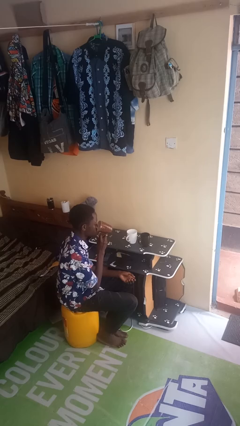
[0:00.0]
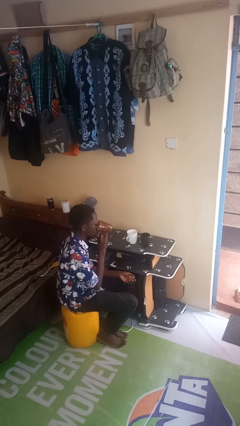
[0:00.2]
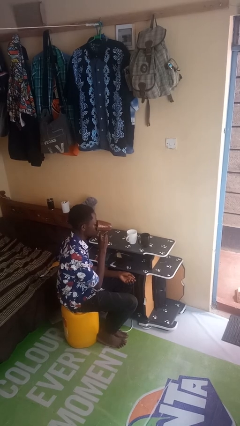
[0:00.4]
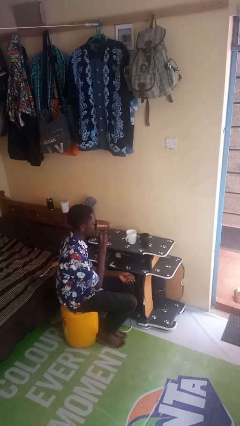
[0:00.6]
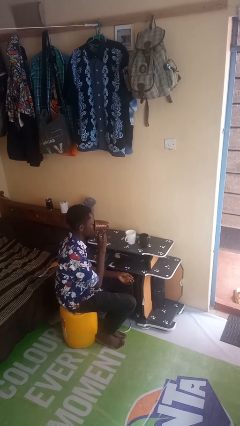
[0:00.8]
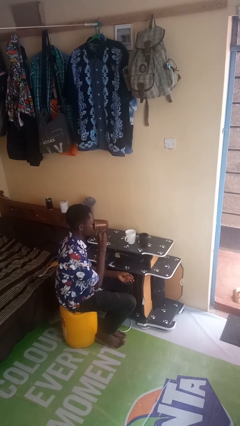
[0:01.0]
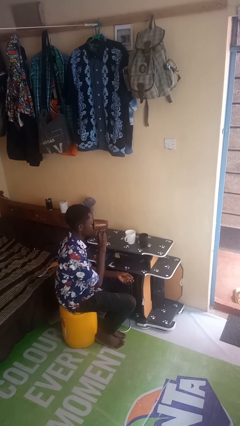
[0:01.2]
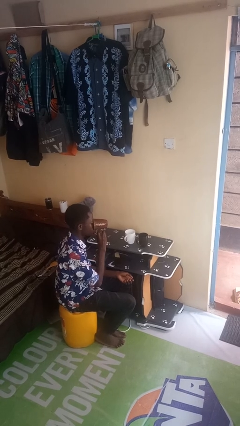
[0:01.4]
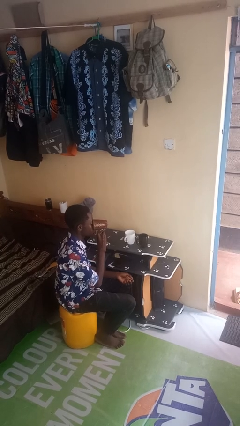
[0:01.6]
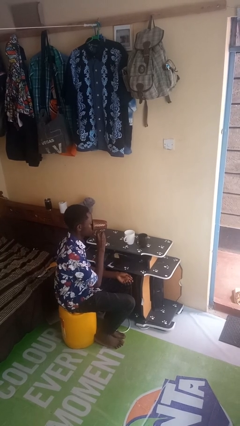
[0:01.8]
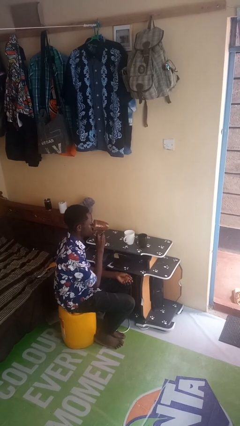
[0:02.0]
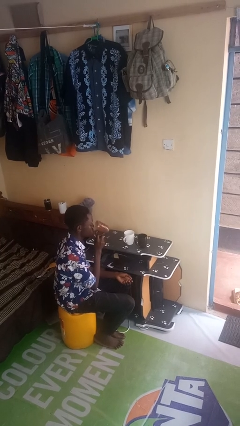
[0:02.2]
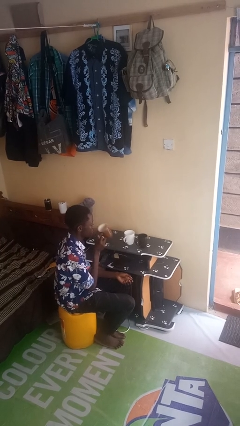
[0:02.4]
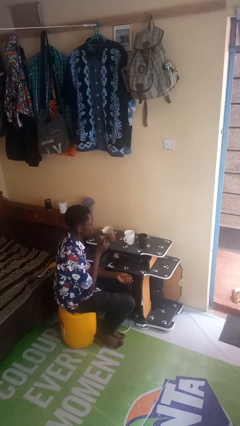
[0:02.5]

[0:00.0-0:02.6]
person drinks from shotglass

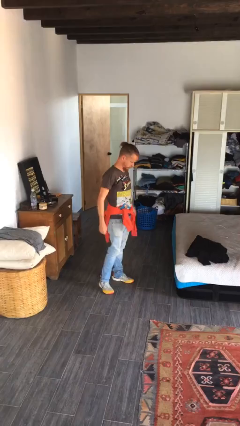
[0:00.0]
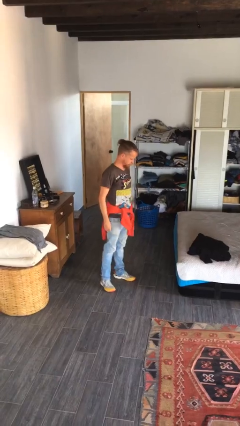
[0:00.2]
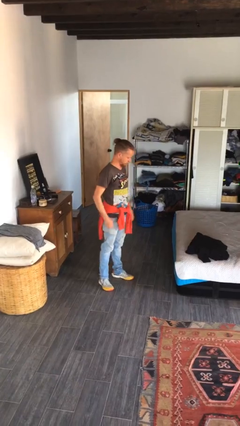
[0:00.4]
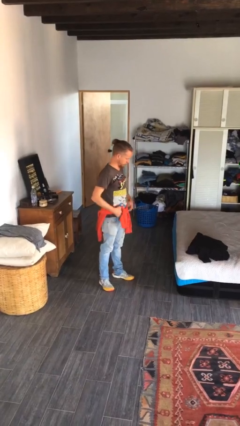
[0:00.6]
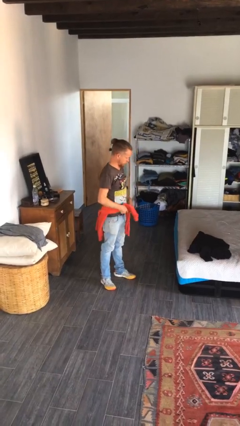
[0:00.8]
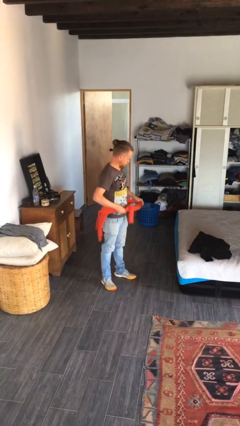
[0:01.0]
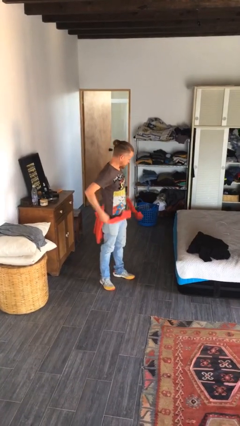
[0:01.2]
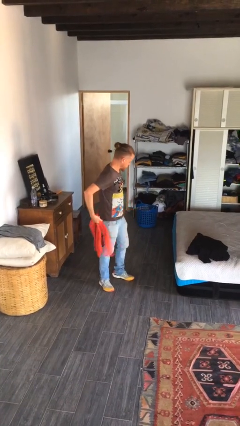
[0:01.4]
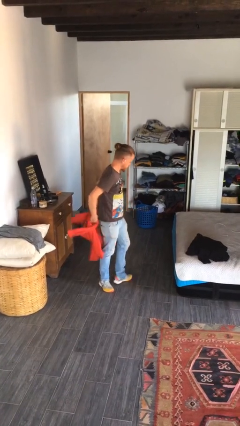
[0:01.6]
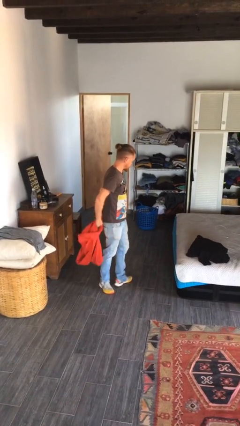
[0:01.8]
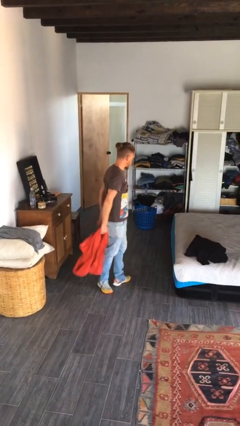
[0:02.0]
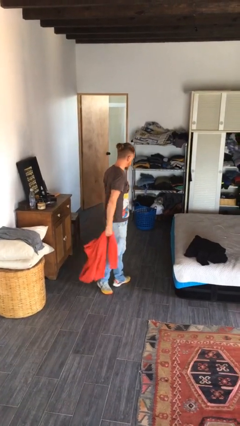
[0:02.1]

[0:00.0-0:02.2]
person unties jacket around waist

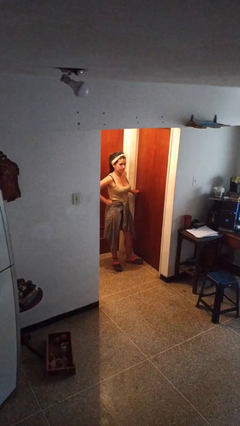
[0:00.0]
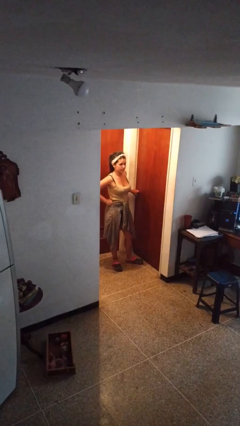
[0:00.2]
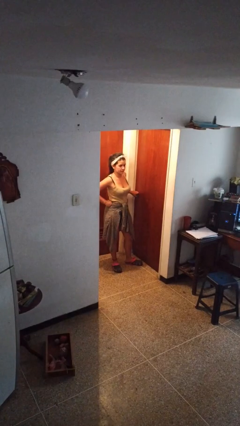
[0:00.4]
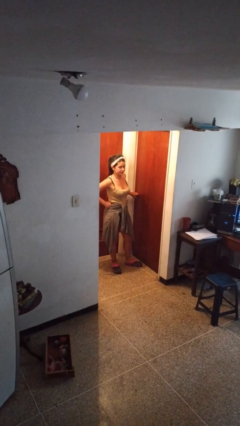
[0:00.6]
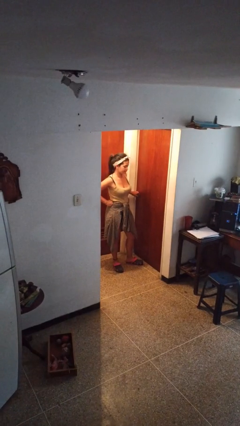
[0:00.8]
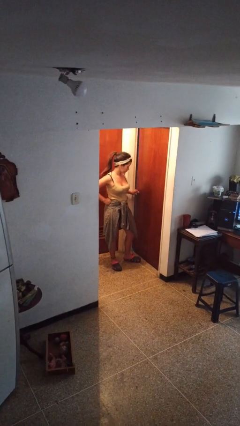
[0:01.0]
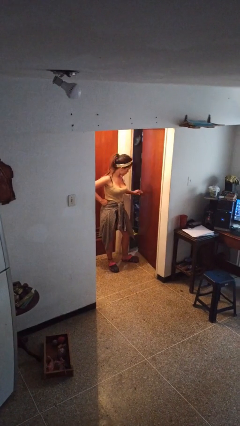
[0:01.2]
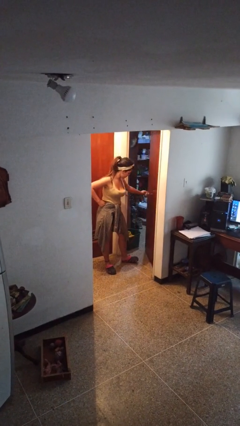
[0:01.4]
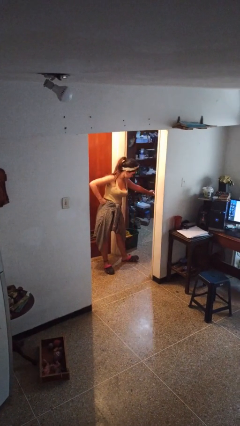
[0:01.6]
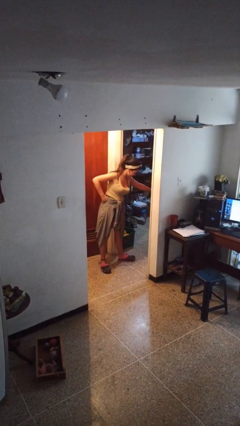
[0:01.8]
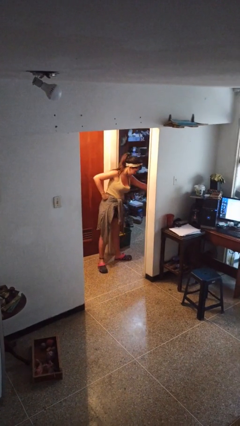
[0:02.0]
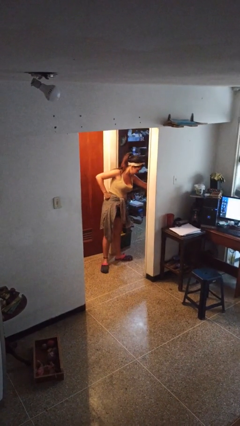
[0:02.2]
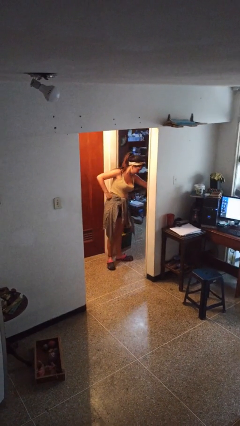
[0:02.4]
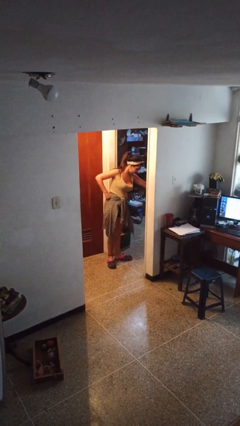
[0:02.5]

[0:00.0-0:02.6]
person opens facility door

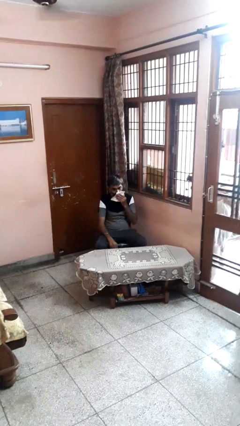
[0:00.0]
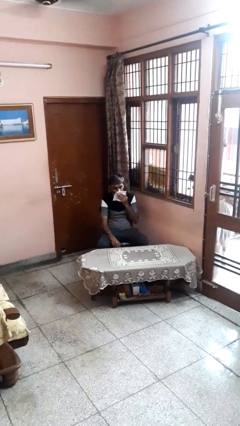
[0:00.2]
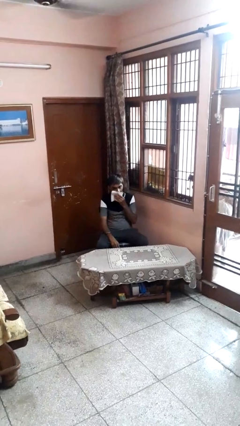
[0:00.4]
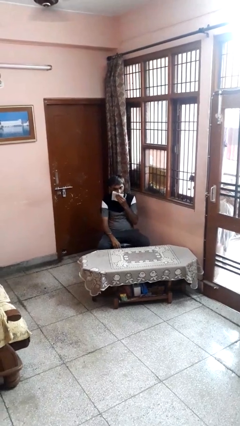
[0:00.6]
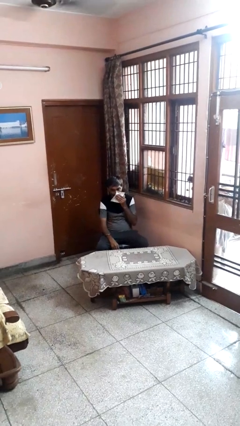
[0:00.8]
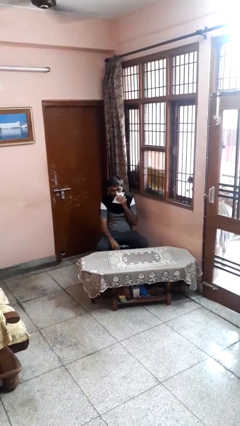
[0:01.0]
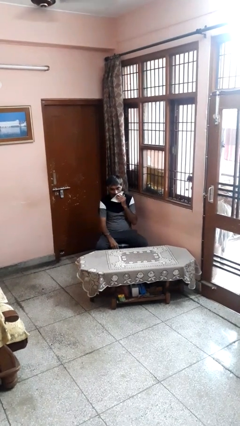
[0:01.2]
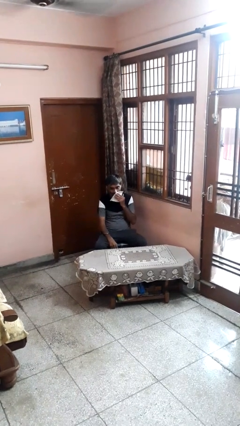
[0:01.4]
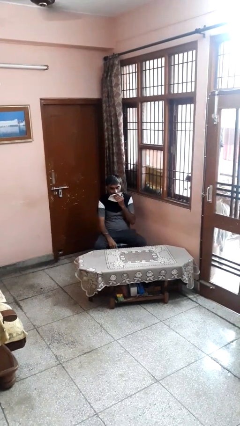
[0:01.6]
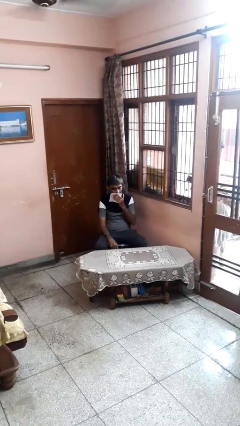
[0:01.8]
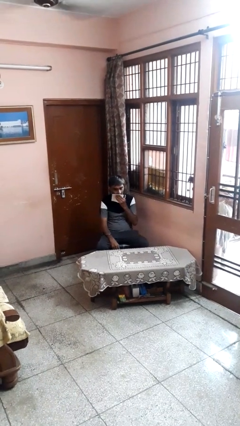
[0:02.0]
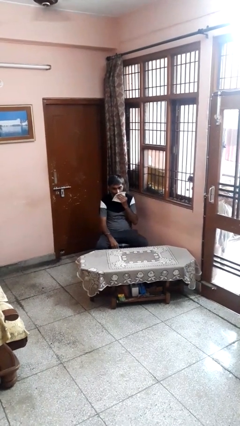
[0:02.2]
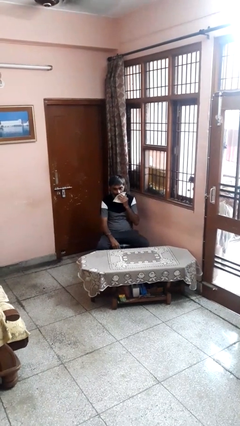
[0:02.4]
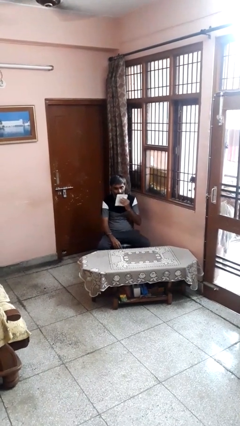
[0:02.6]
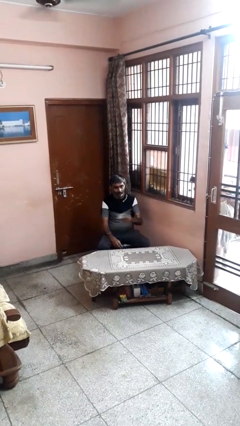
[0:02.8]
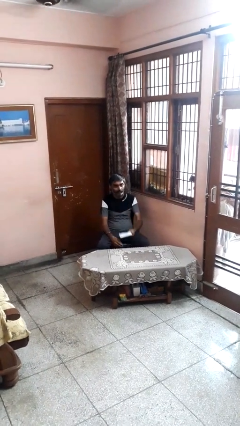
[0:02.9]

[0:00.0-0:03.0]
person wipes mouth with napkin

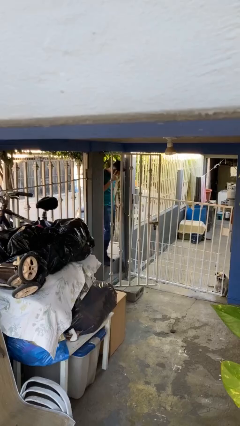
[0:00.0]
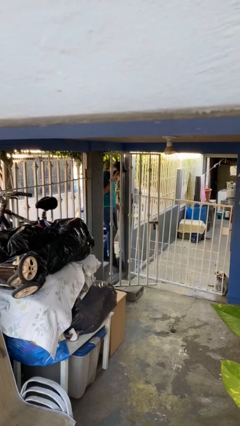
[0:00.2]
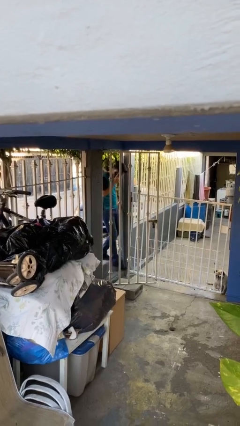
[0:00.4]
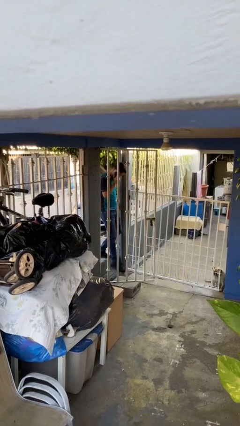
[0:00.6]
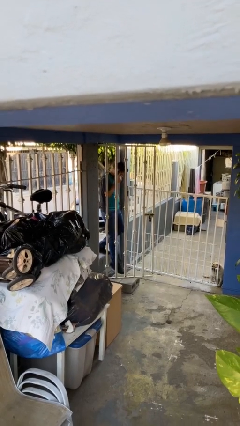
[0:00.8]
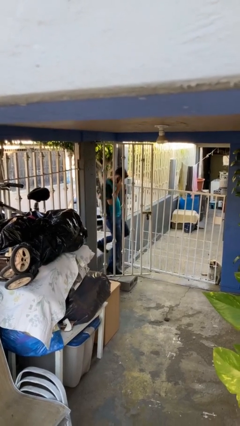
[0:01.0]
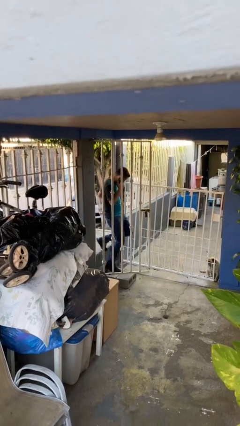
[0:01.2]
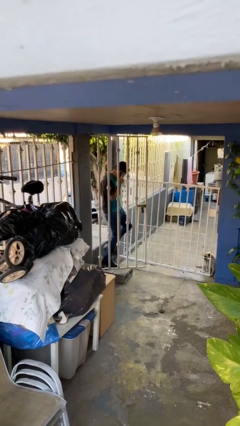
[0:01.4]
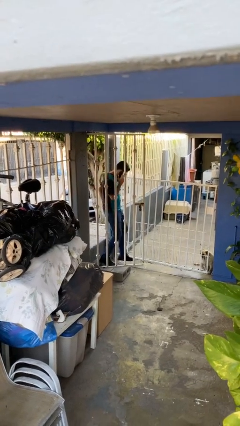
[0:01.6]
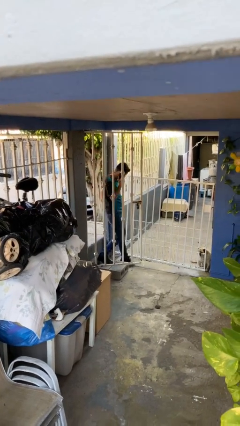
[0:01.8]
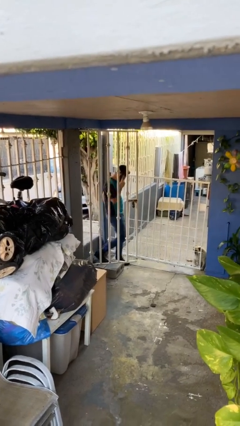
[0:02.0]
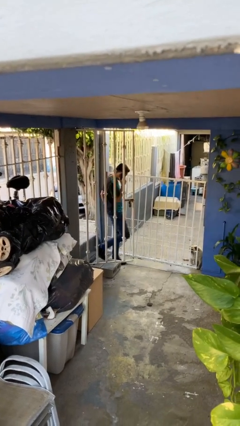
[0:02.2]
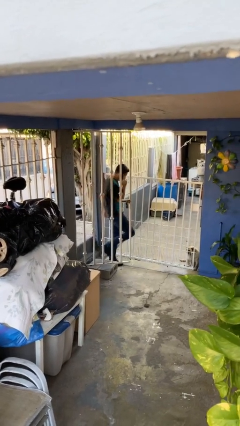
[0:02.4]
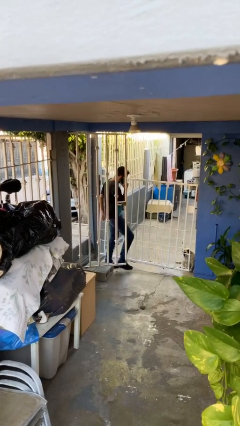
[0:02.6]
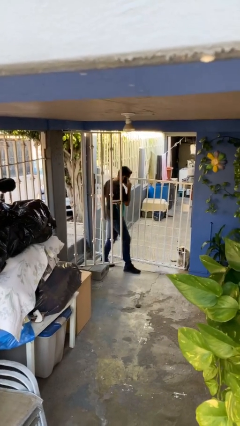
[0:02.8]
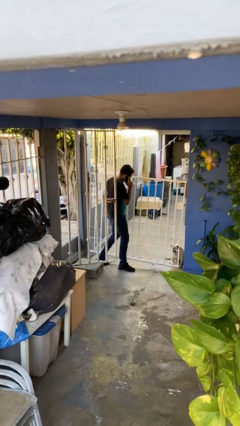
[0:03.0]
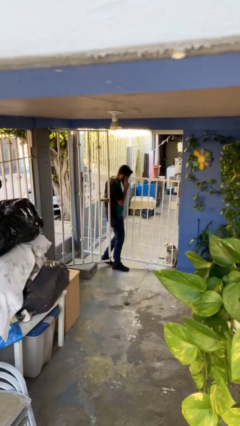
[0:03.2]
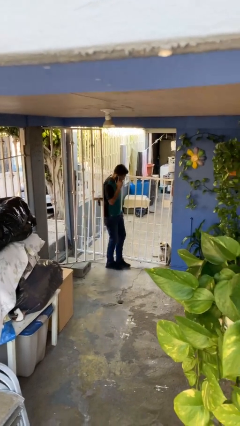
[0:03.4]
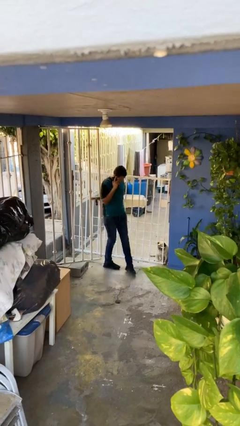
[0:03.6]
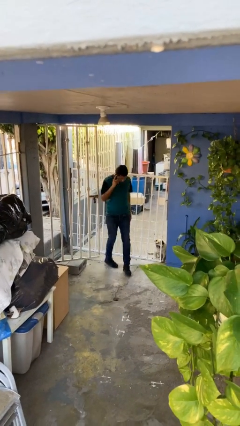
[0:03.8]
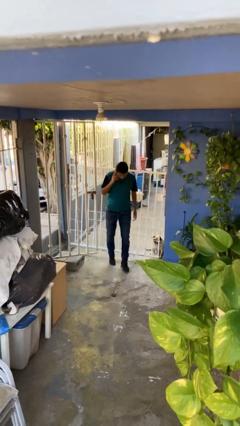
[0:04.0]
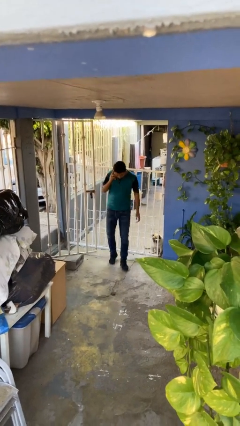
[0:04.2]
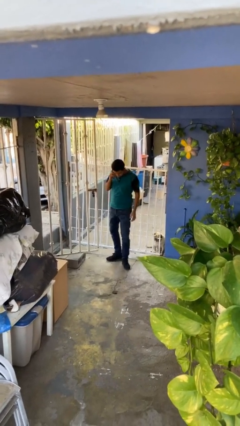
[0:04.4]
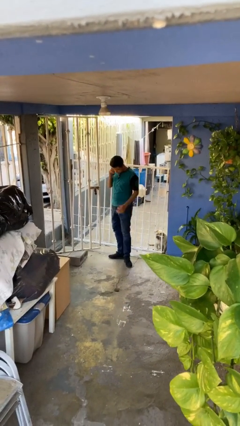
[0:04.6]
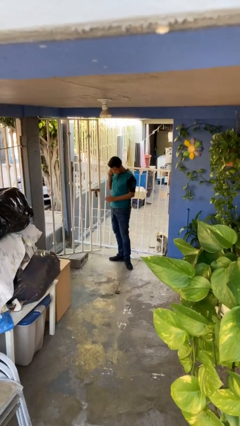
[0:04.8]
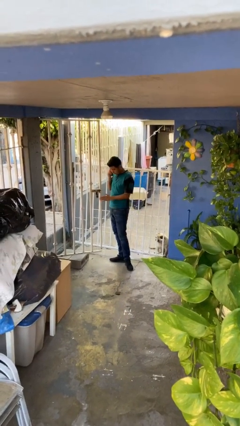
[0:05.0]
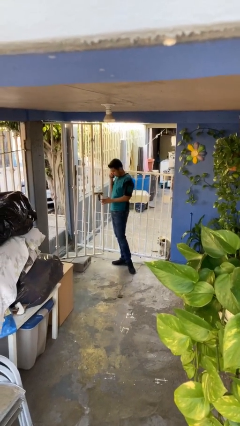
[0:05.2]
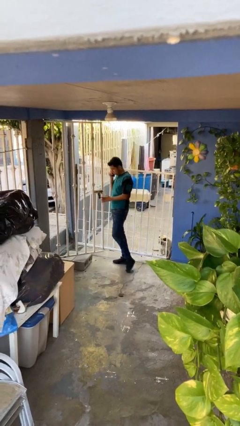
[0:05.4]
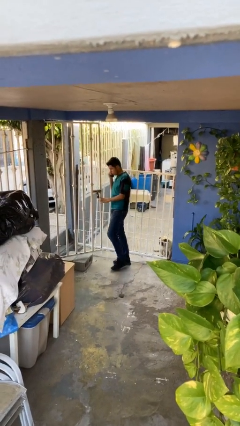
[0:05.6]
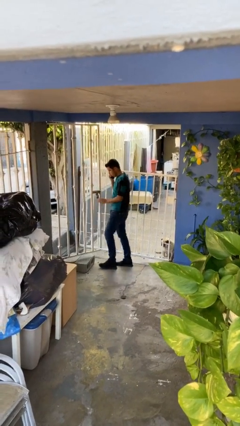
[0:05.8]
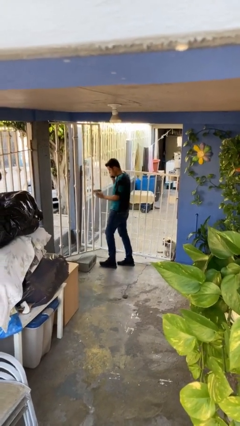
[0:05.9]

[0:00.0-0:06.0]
person enters scene through structure

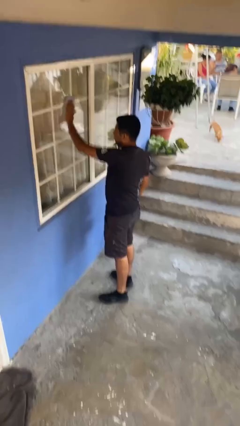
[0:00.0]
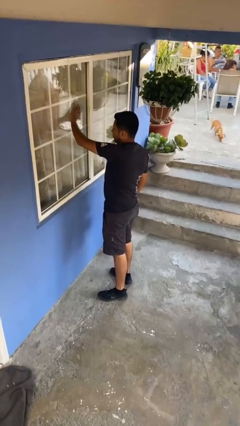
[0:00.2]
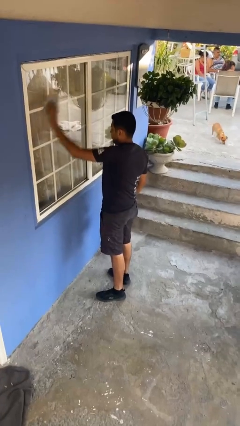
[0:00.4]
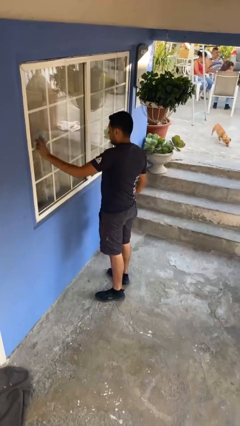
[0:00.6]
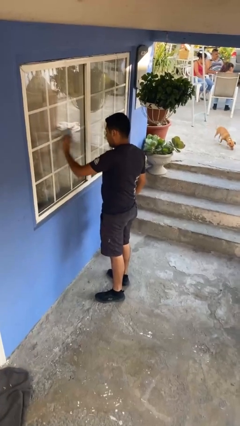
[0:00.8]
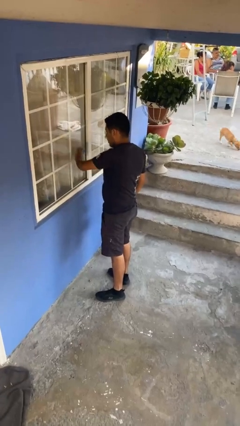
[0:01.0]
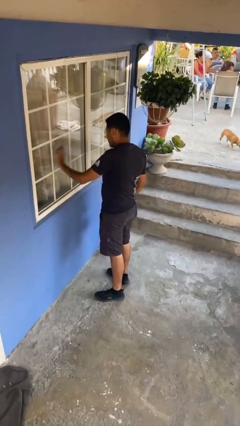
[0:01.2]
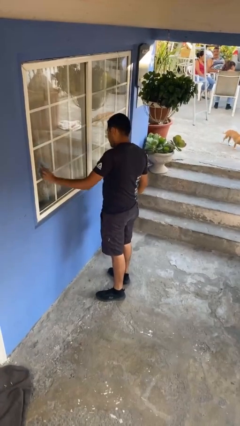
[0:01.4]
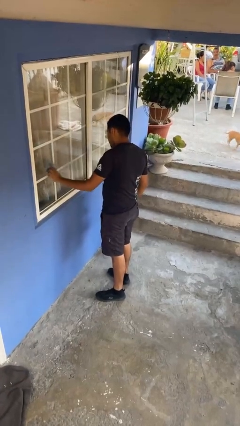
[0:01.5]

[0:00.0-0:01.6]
person washes window
